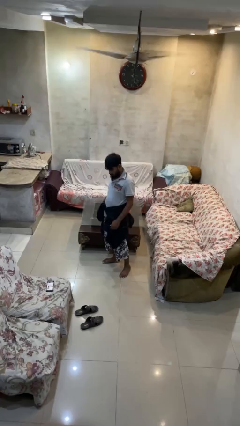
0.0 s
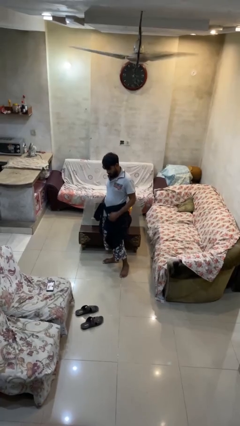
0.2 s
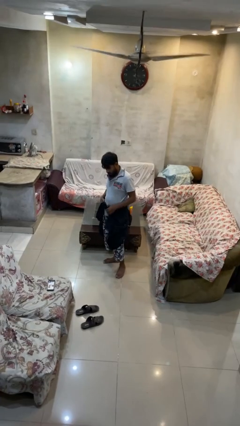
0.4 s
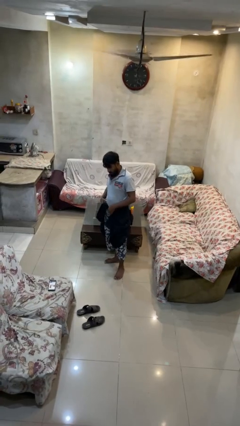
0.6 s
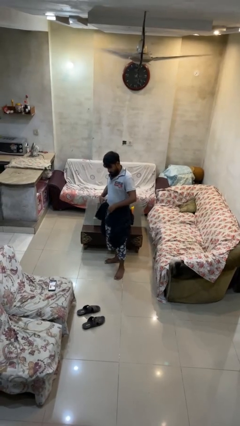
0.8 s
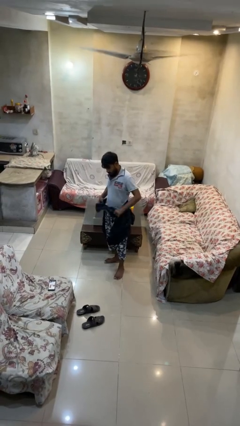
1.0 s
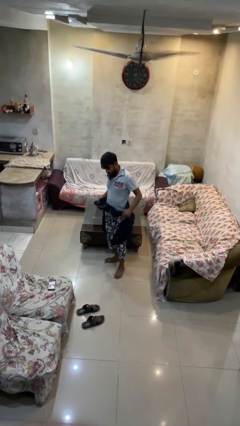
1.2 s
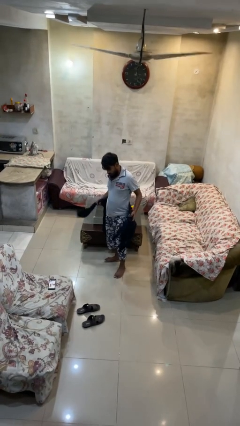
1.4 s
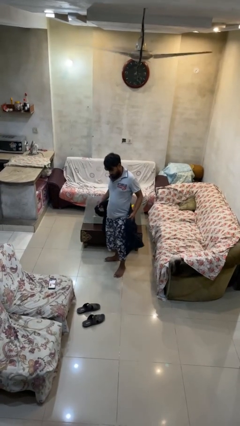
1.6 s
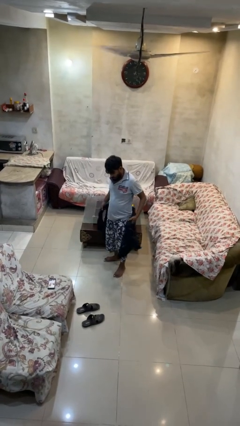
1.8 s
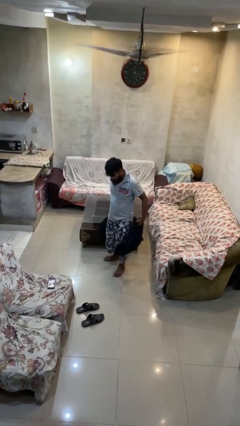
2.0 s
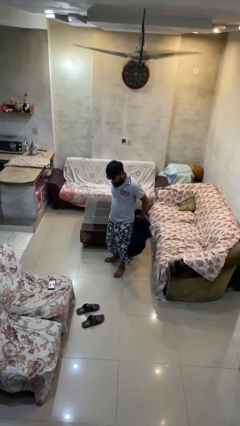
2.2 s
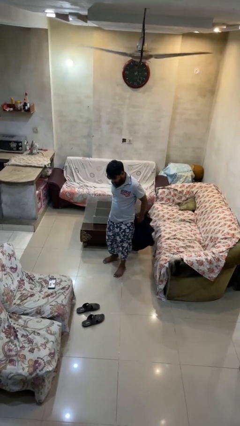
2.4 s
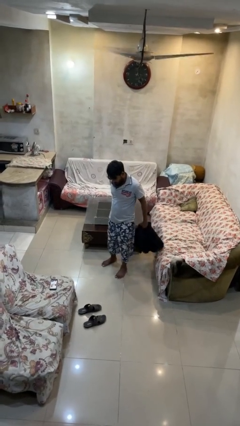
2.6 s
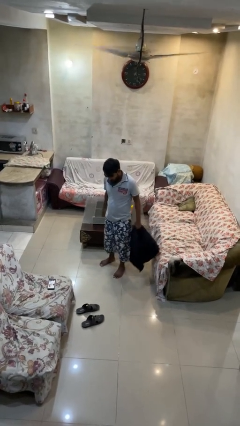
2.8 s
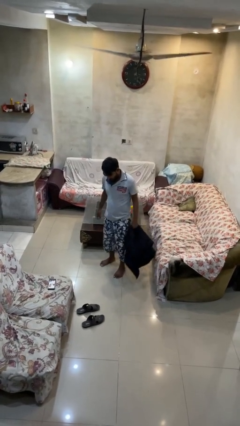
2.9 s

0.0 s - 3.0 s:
person unties jacket around waist

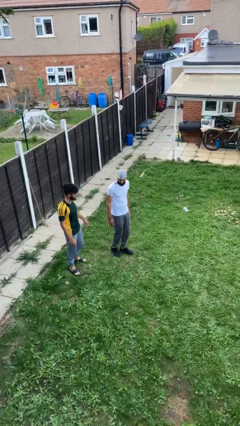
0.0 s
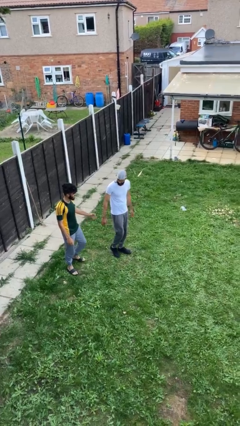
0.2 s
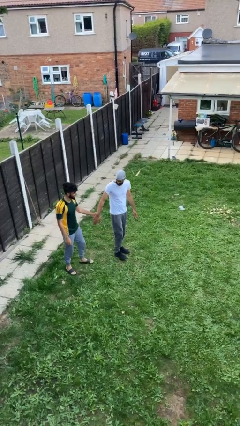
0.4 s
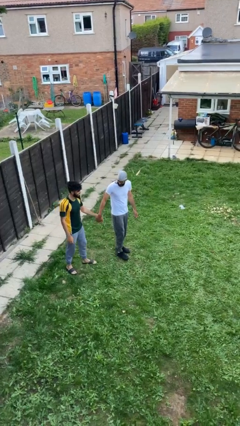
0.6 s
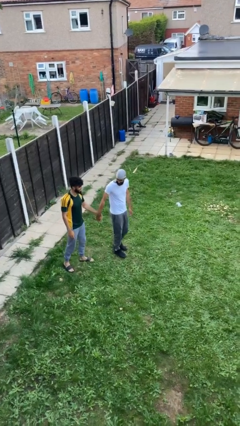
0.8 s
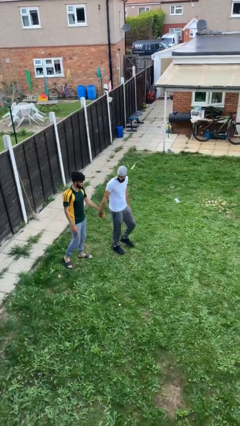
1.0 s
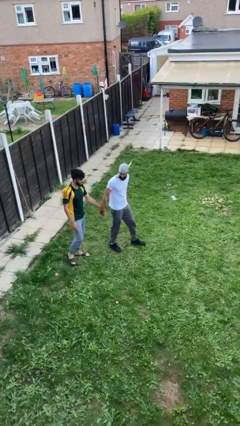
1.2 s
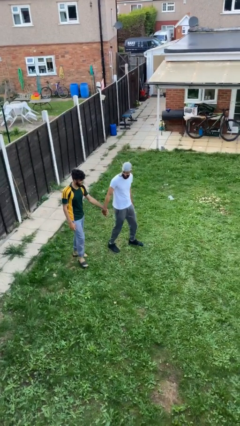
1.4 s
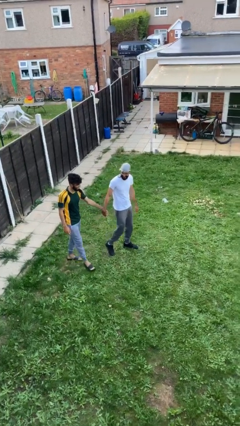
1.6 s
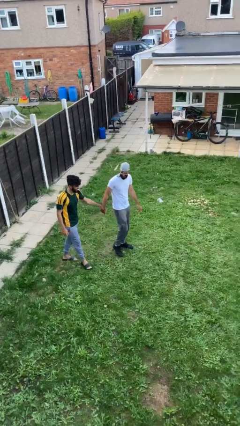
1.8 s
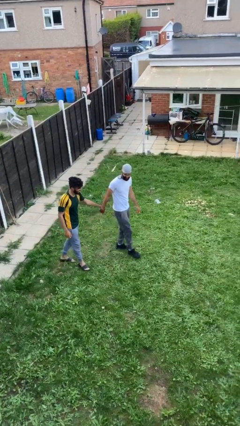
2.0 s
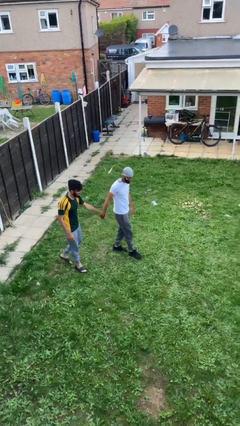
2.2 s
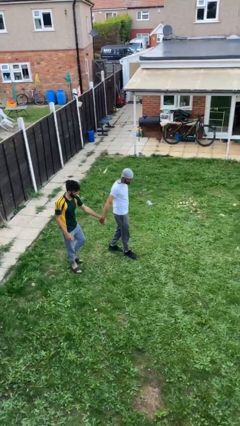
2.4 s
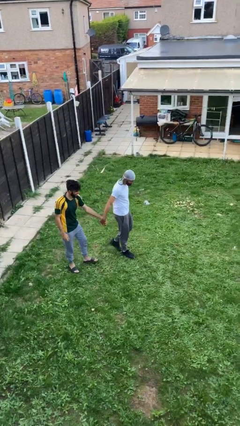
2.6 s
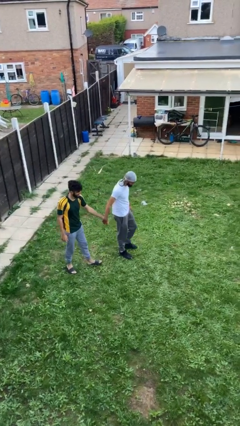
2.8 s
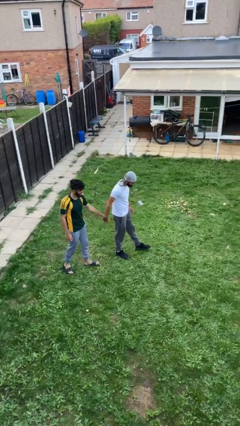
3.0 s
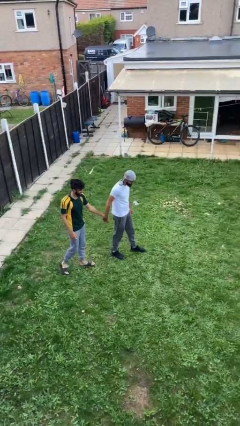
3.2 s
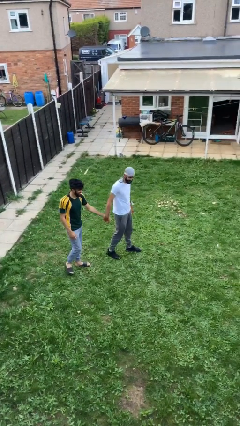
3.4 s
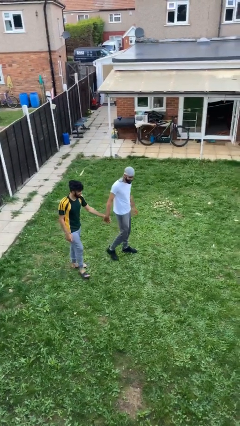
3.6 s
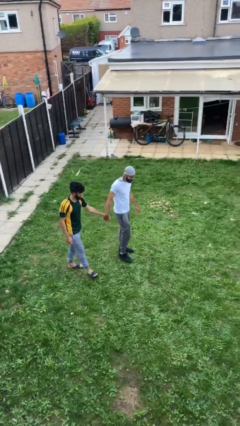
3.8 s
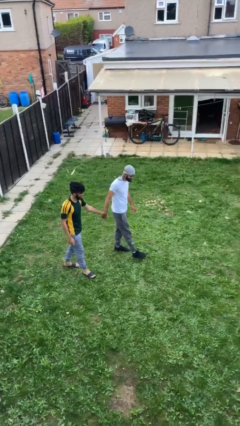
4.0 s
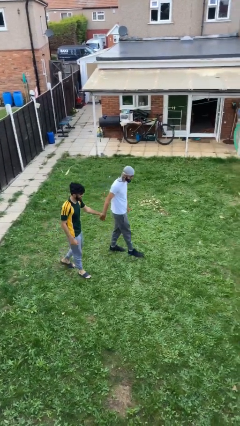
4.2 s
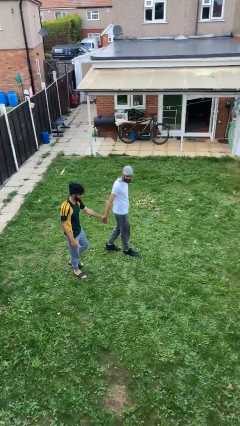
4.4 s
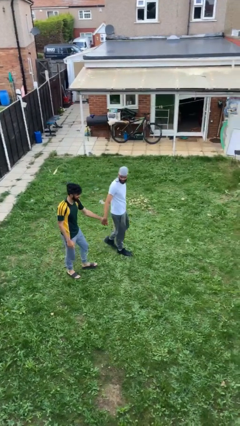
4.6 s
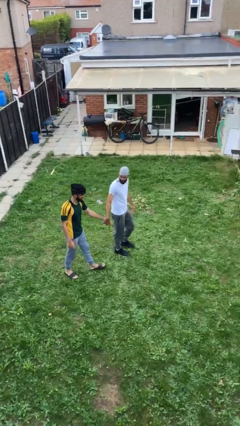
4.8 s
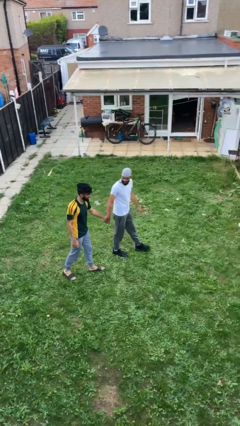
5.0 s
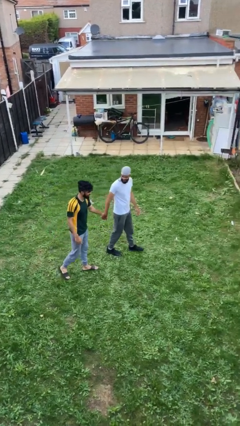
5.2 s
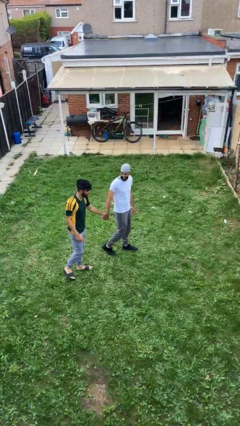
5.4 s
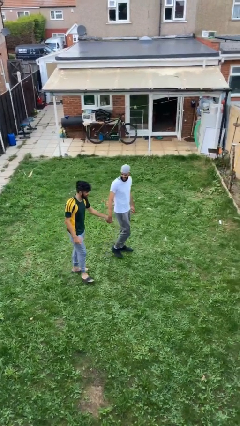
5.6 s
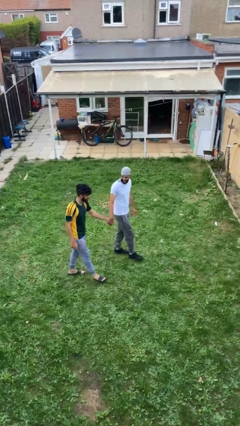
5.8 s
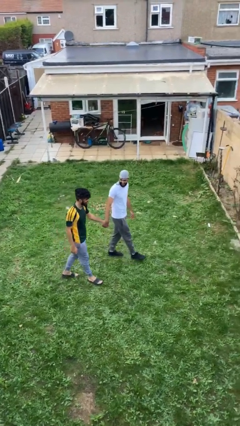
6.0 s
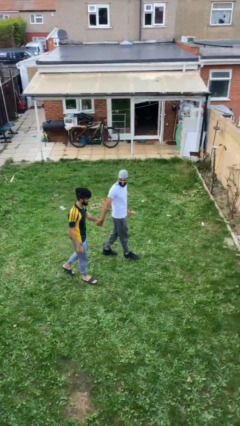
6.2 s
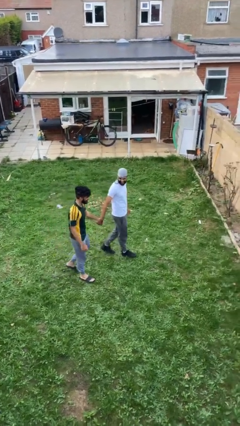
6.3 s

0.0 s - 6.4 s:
person holds hand

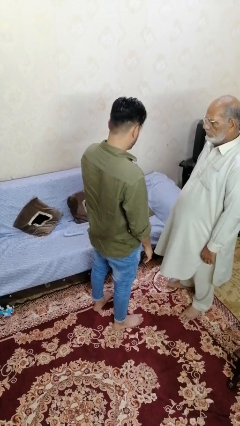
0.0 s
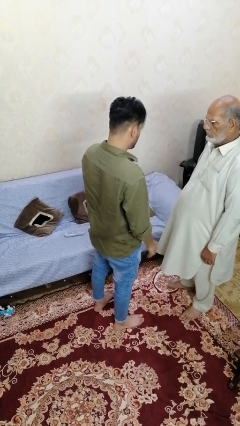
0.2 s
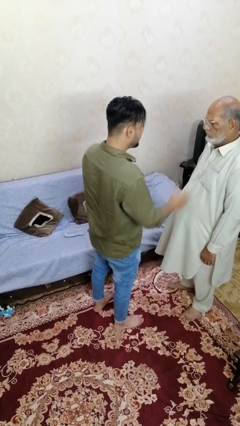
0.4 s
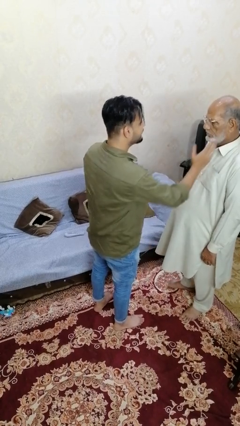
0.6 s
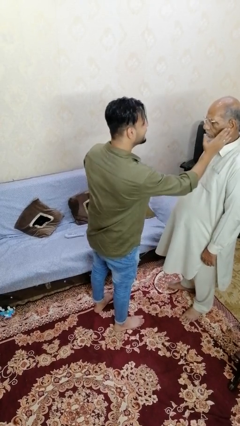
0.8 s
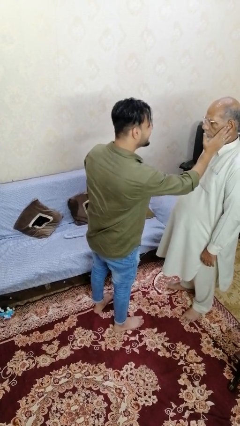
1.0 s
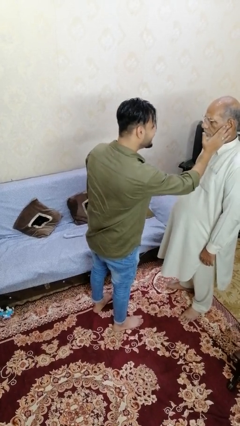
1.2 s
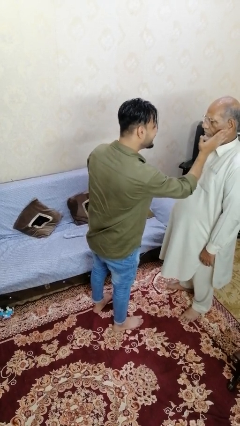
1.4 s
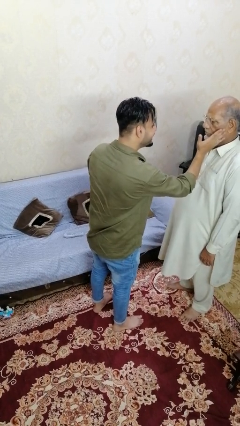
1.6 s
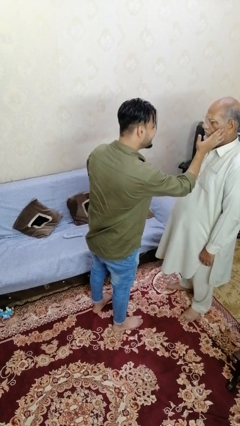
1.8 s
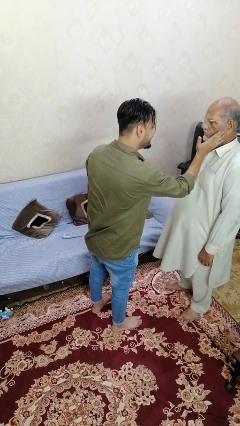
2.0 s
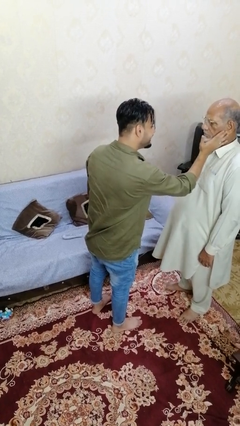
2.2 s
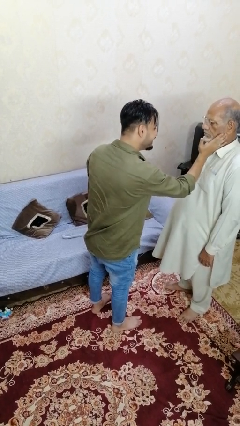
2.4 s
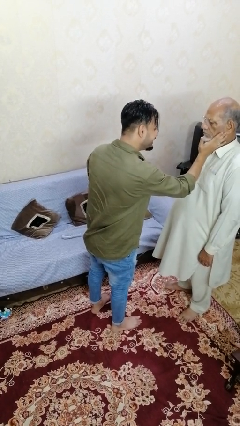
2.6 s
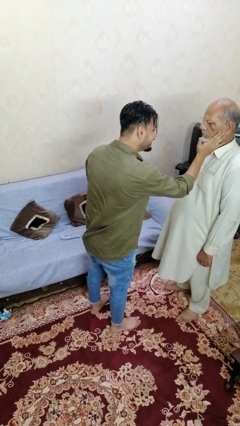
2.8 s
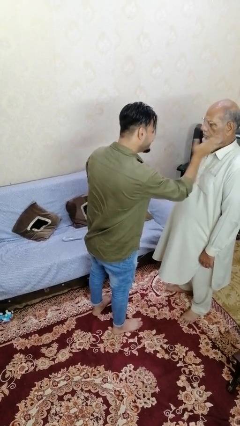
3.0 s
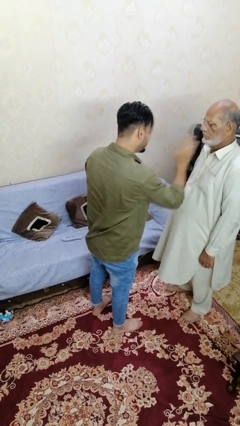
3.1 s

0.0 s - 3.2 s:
person touches face of person

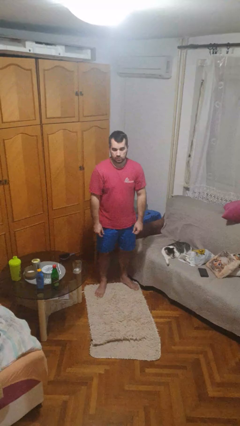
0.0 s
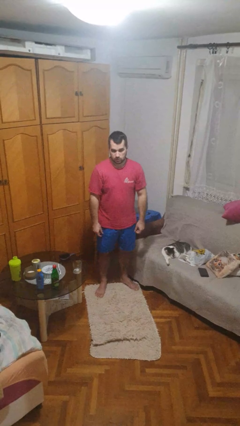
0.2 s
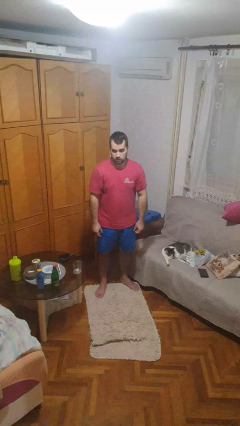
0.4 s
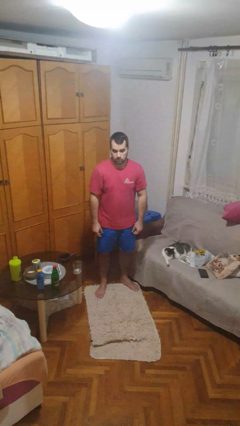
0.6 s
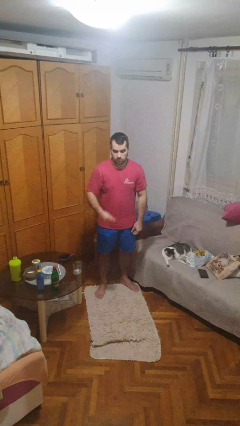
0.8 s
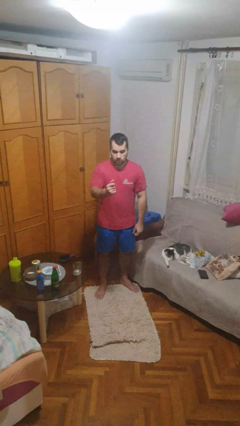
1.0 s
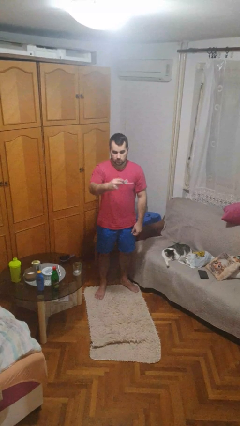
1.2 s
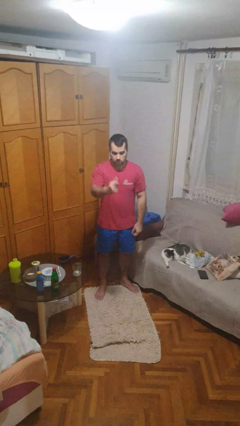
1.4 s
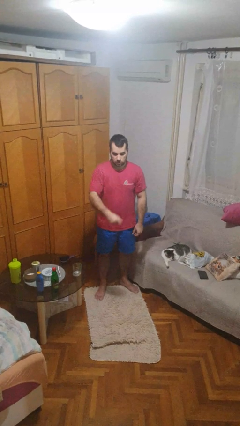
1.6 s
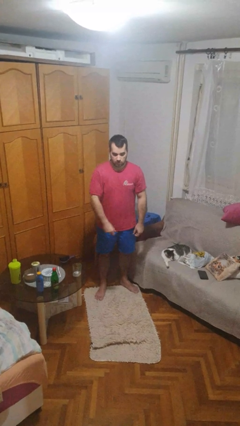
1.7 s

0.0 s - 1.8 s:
person snaps fingers

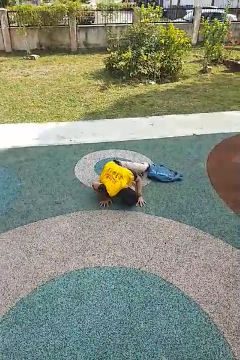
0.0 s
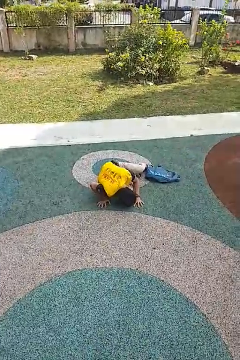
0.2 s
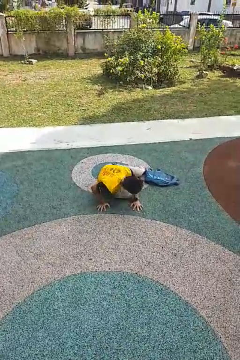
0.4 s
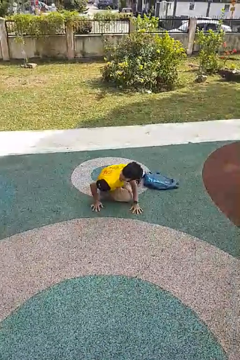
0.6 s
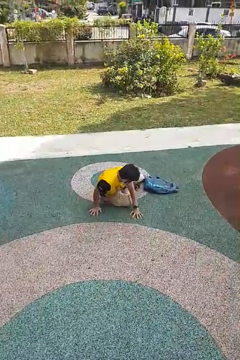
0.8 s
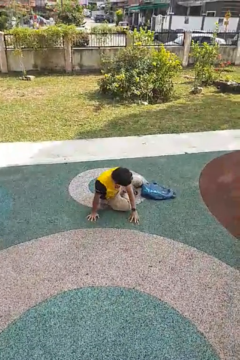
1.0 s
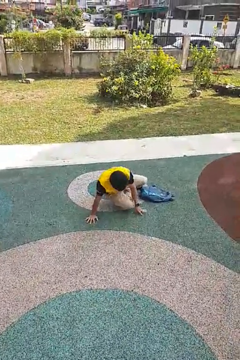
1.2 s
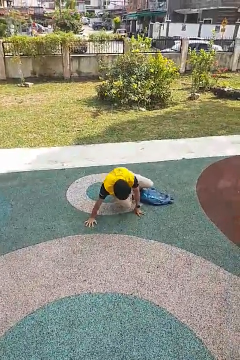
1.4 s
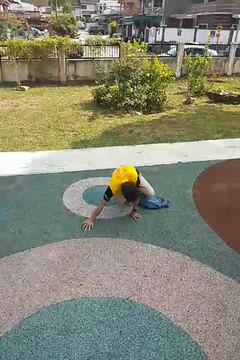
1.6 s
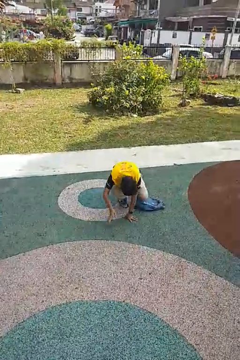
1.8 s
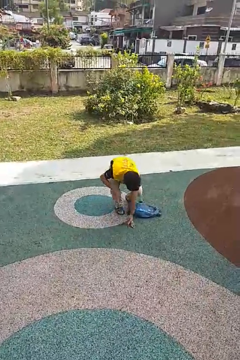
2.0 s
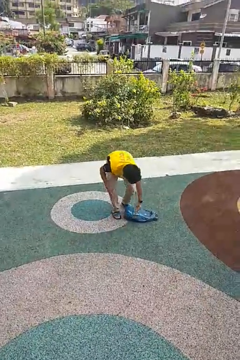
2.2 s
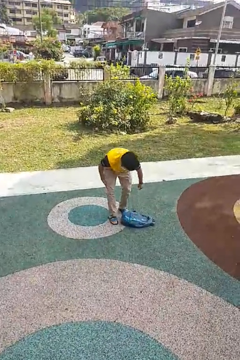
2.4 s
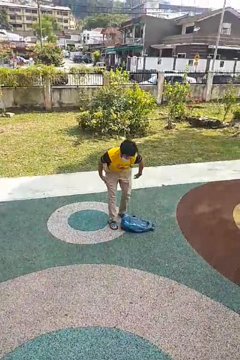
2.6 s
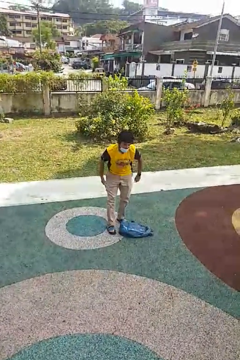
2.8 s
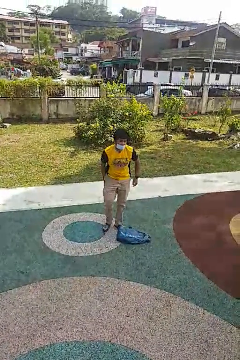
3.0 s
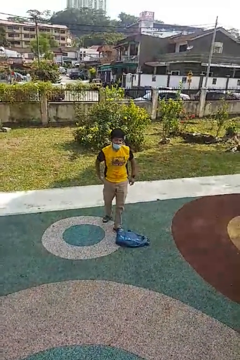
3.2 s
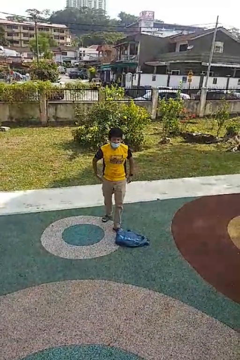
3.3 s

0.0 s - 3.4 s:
person stands up from floor

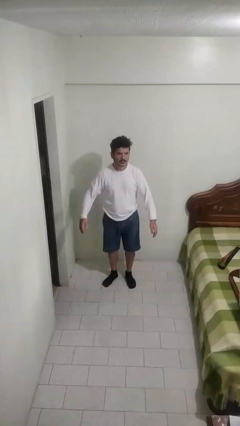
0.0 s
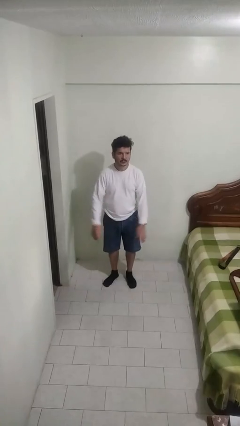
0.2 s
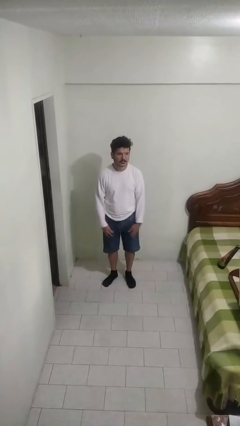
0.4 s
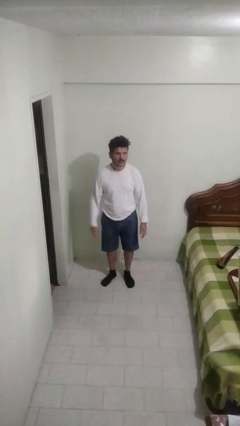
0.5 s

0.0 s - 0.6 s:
person slaps hands on thighs
